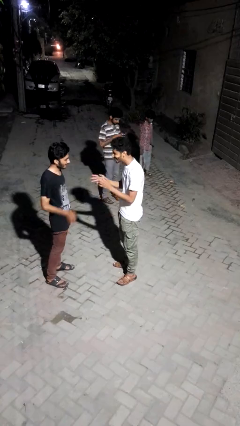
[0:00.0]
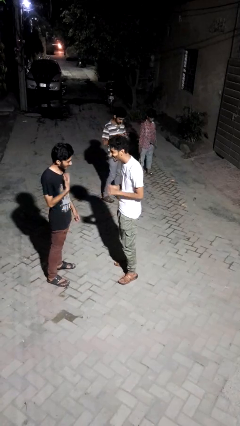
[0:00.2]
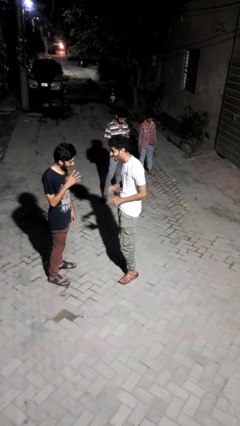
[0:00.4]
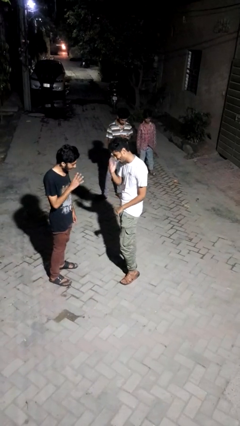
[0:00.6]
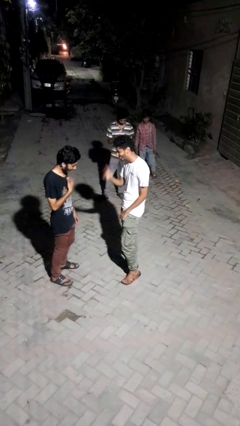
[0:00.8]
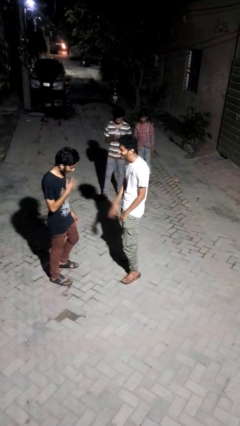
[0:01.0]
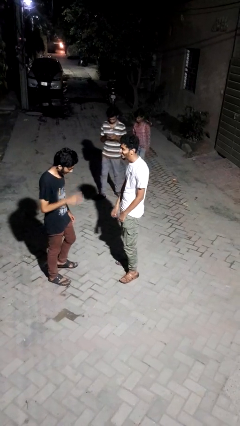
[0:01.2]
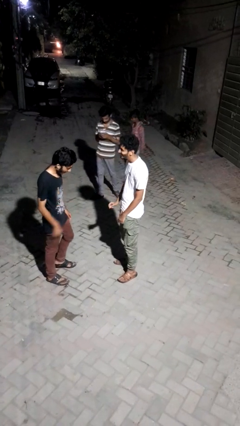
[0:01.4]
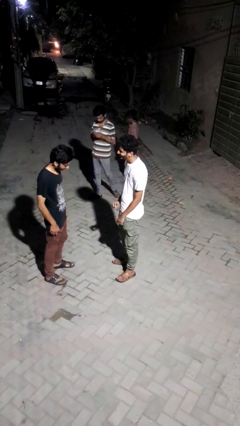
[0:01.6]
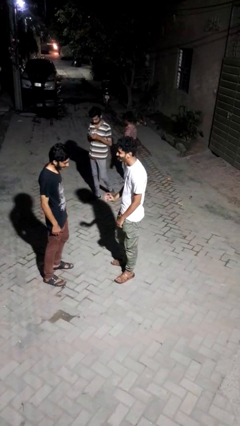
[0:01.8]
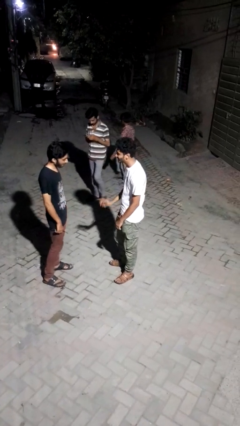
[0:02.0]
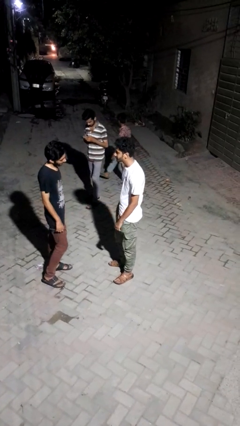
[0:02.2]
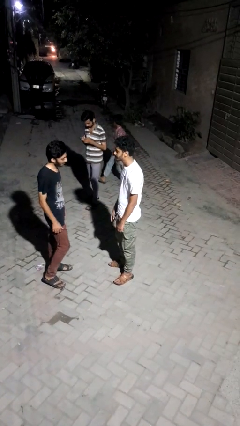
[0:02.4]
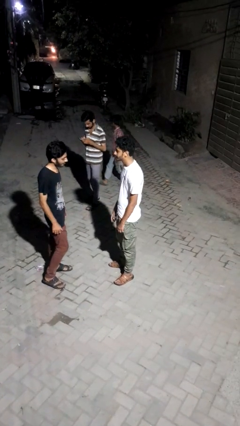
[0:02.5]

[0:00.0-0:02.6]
person talks to person

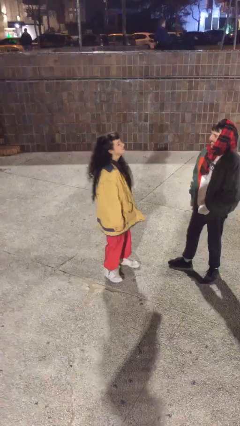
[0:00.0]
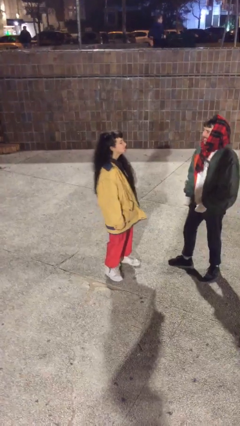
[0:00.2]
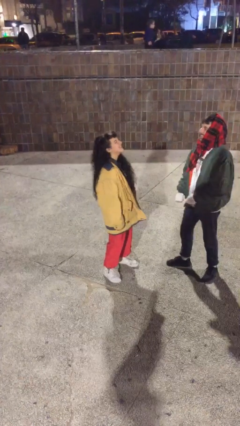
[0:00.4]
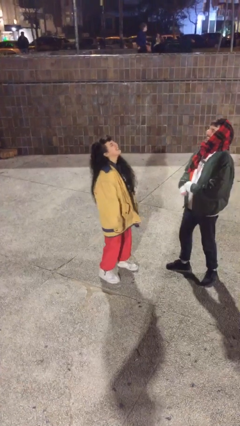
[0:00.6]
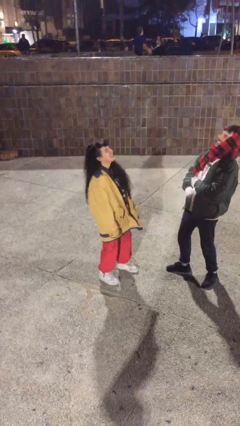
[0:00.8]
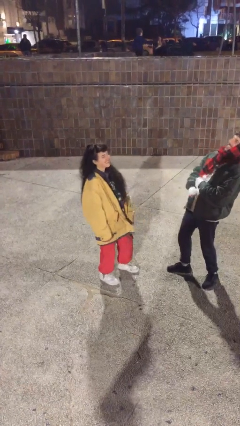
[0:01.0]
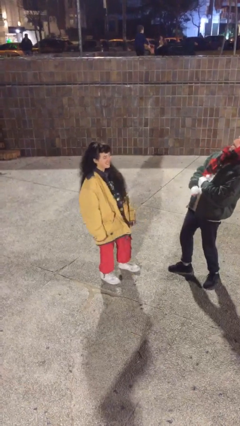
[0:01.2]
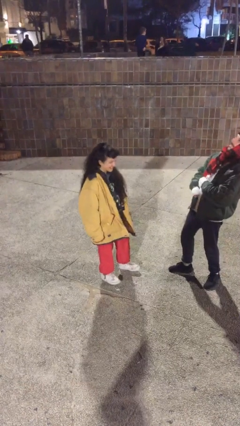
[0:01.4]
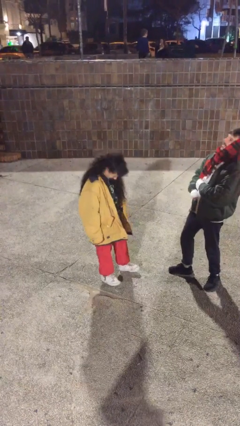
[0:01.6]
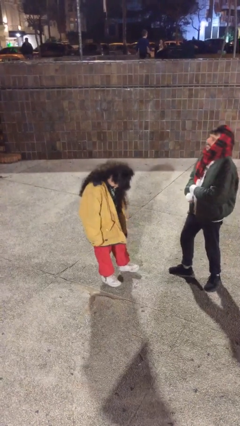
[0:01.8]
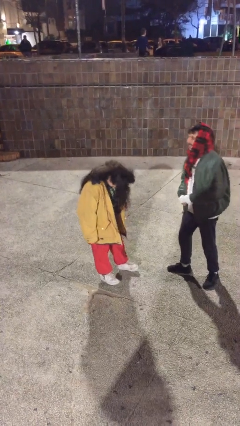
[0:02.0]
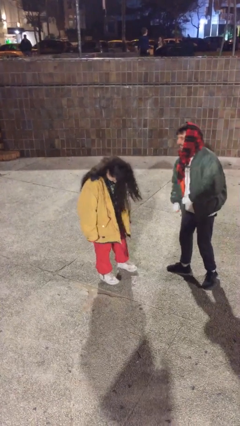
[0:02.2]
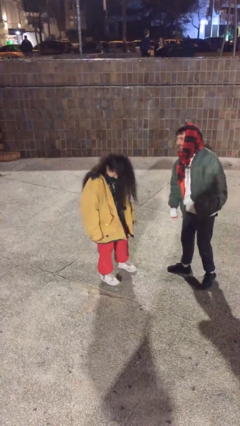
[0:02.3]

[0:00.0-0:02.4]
person laughs with person

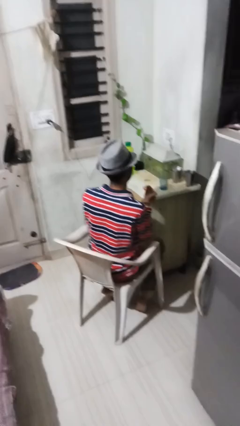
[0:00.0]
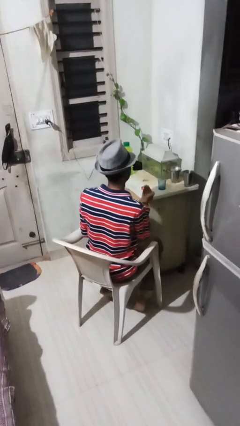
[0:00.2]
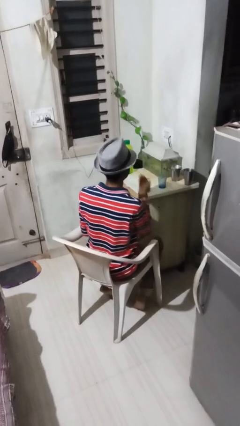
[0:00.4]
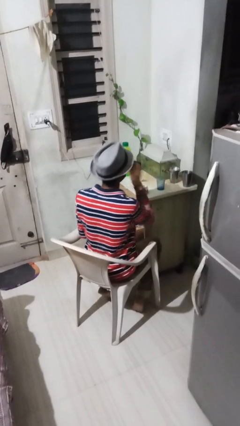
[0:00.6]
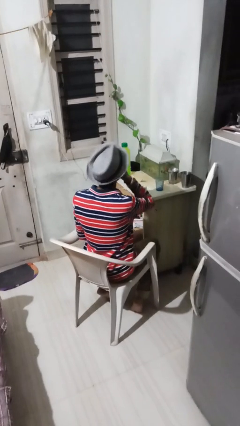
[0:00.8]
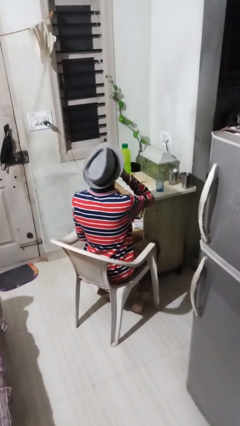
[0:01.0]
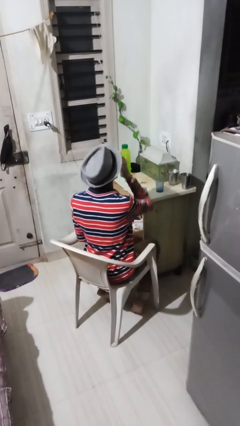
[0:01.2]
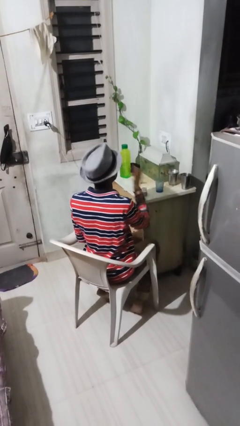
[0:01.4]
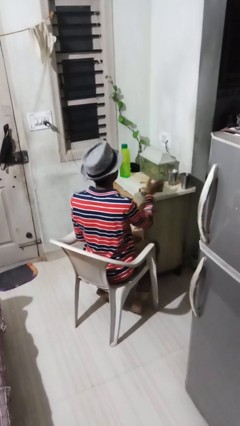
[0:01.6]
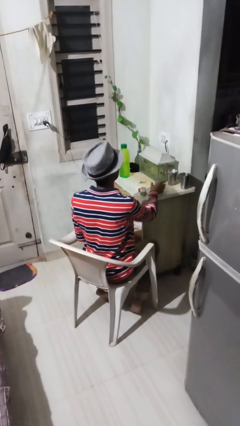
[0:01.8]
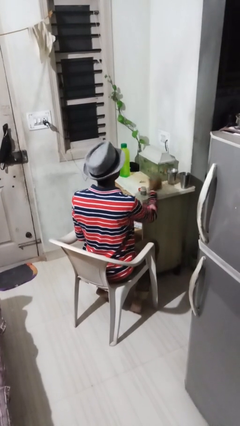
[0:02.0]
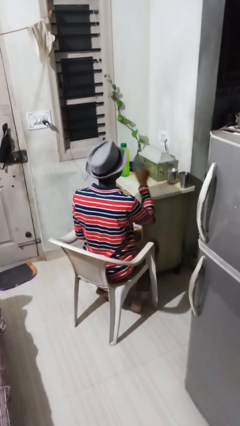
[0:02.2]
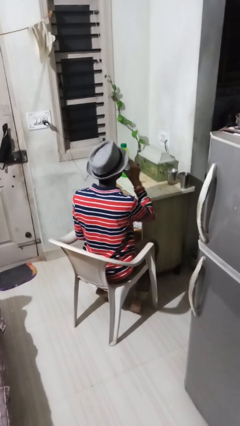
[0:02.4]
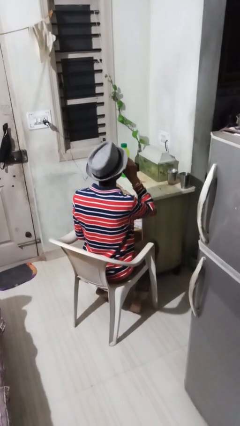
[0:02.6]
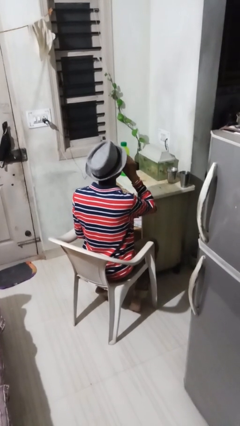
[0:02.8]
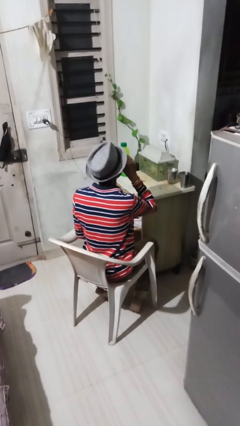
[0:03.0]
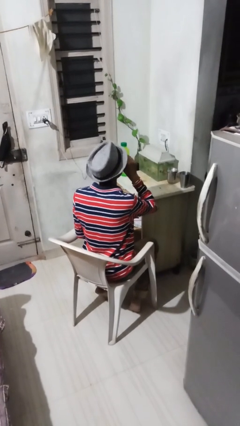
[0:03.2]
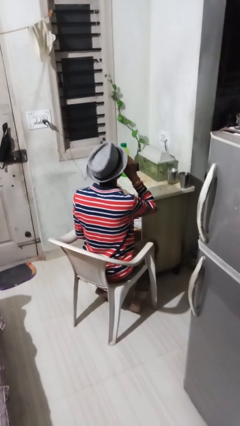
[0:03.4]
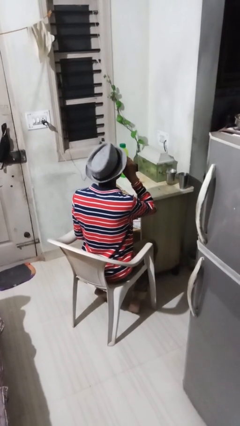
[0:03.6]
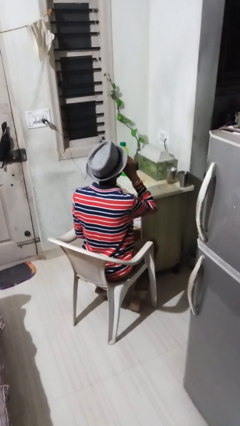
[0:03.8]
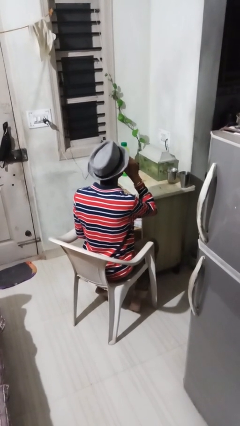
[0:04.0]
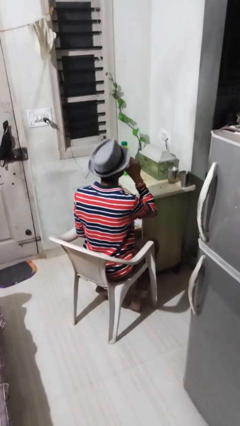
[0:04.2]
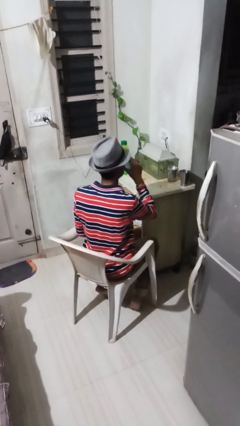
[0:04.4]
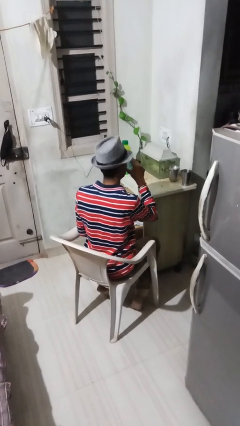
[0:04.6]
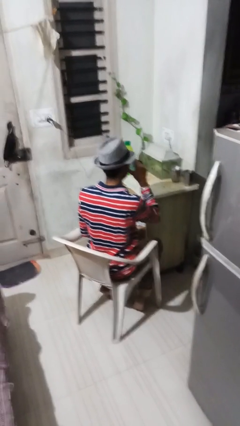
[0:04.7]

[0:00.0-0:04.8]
person drinks from cup

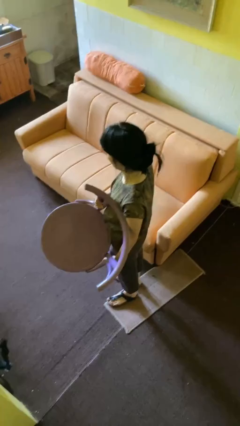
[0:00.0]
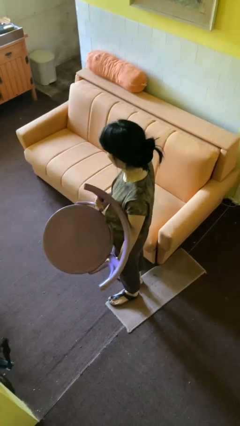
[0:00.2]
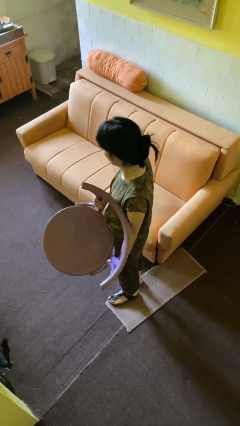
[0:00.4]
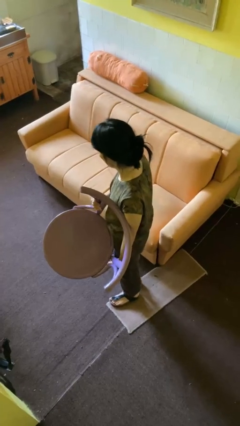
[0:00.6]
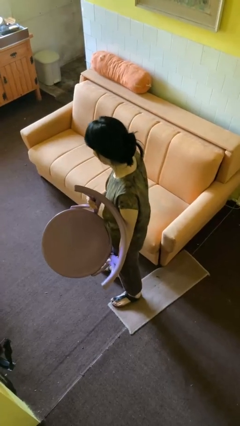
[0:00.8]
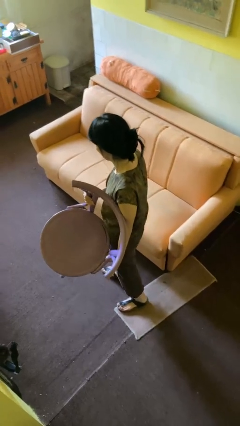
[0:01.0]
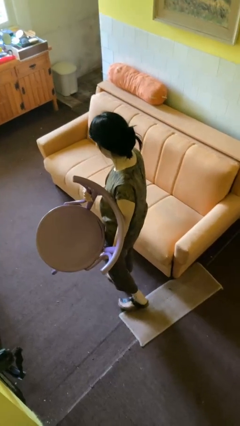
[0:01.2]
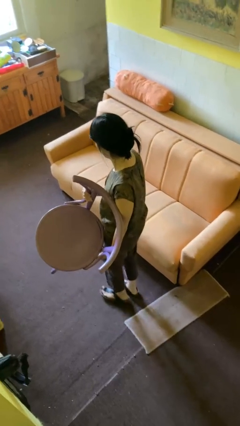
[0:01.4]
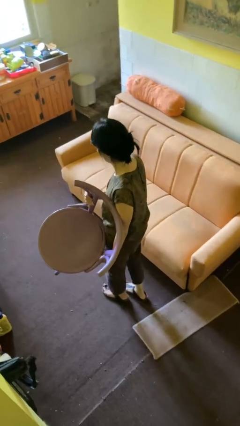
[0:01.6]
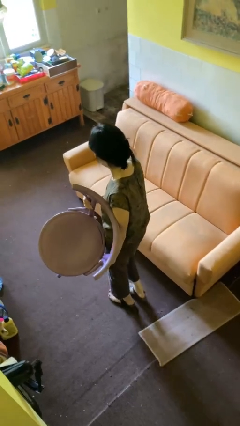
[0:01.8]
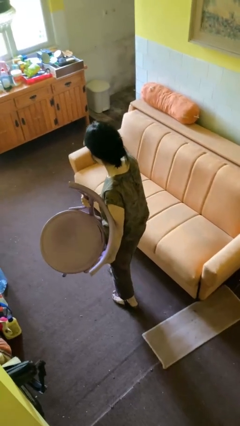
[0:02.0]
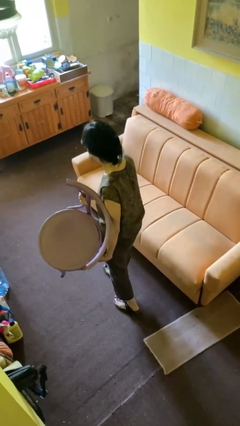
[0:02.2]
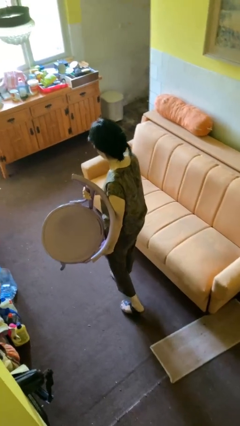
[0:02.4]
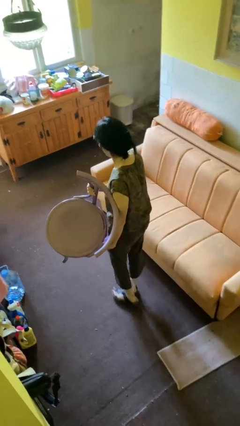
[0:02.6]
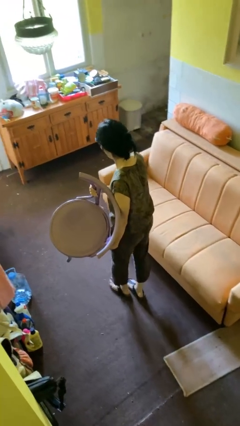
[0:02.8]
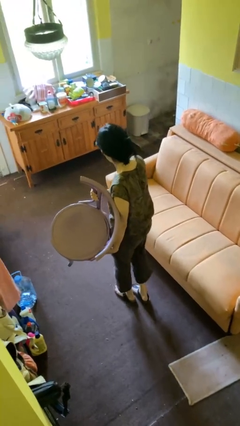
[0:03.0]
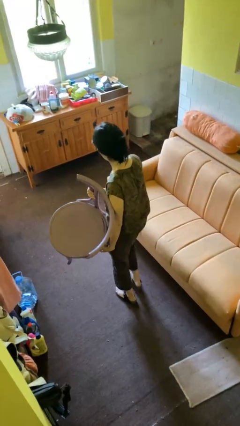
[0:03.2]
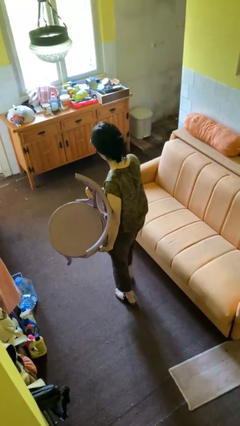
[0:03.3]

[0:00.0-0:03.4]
person carries furniture

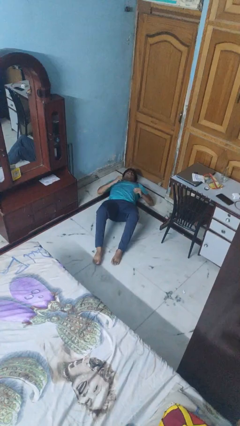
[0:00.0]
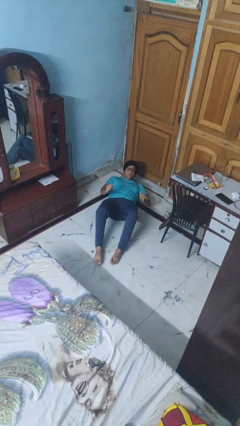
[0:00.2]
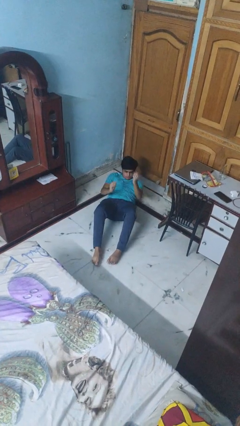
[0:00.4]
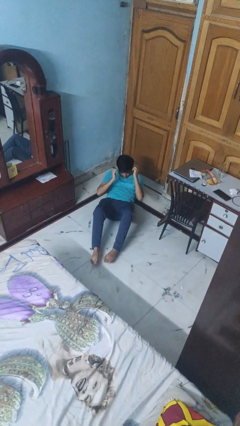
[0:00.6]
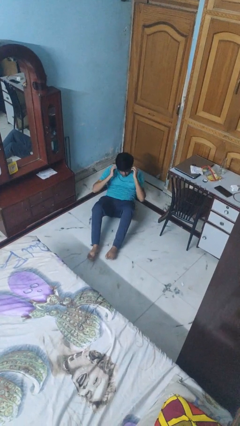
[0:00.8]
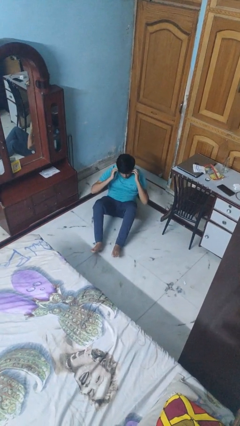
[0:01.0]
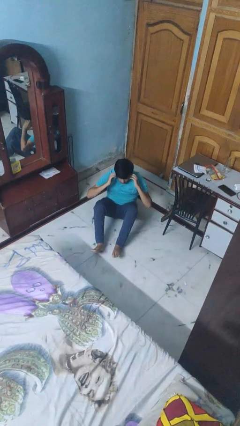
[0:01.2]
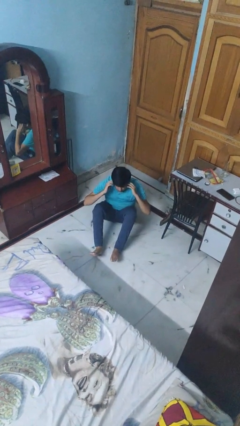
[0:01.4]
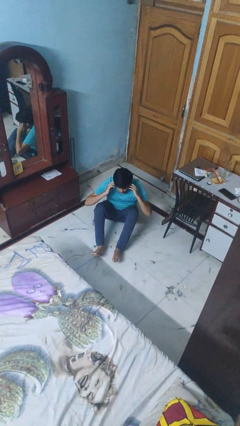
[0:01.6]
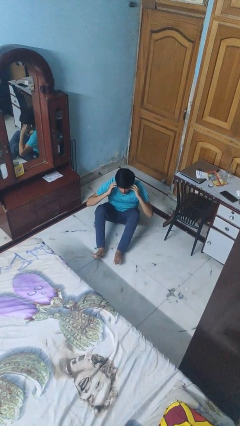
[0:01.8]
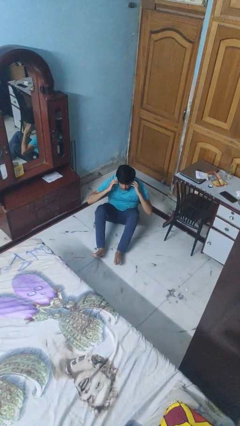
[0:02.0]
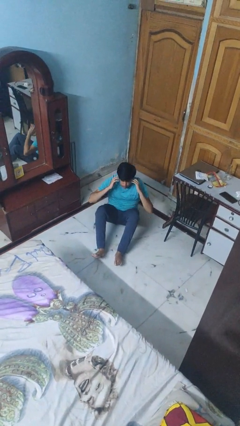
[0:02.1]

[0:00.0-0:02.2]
person exercises with situp

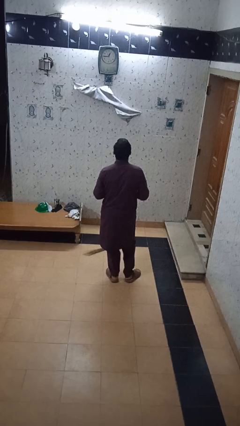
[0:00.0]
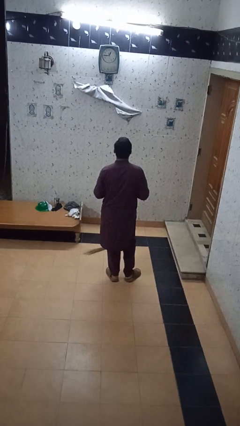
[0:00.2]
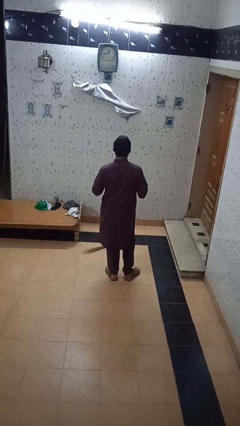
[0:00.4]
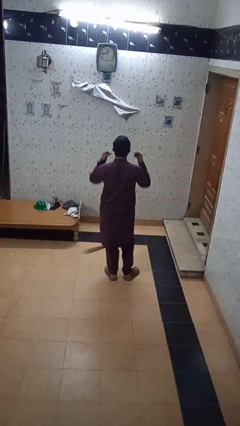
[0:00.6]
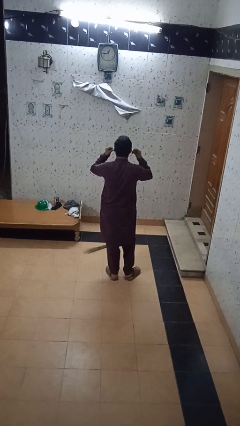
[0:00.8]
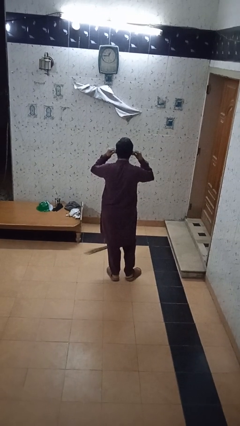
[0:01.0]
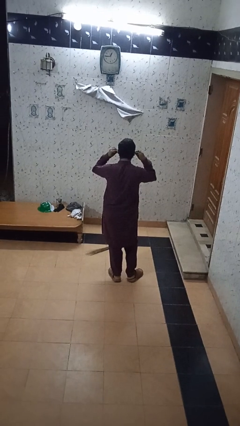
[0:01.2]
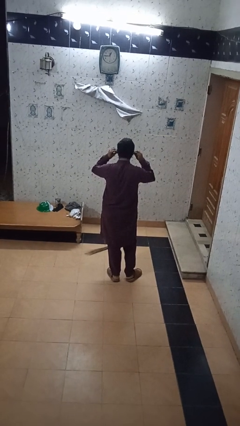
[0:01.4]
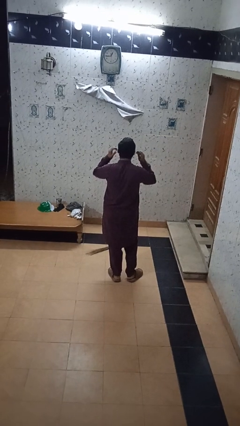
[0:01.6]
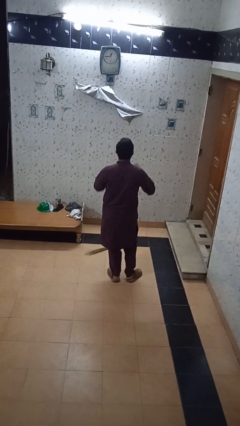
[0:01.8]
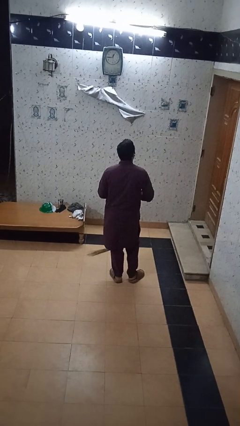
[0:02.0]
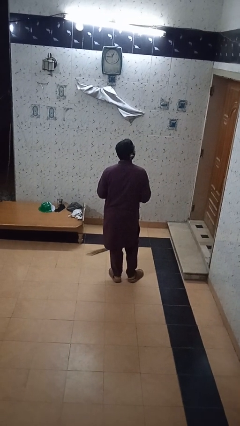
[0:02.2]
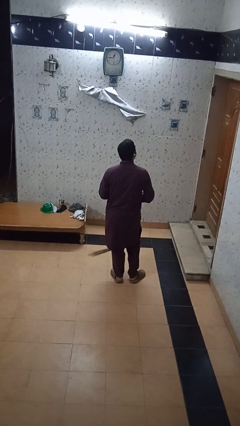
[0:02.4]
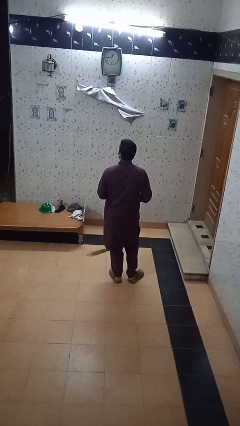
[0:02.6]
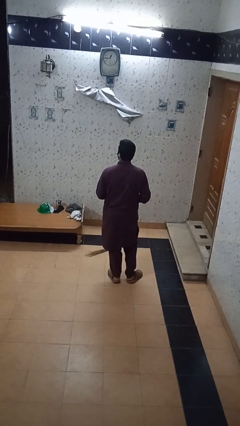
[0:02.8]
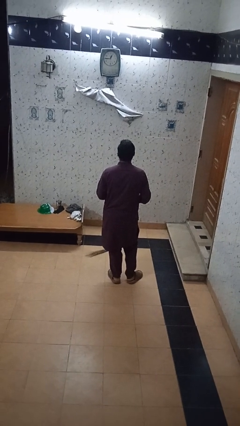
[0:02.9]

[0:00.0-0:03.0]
person puts on headphones
